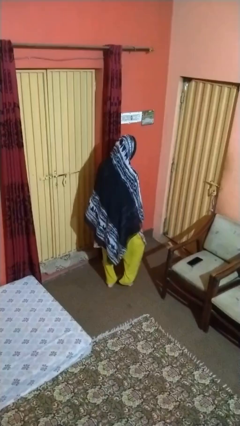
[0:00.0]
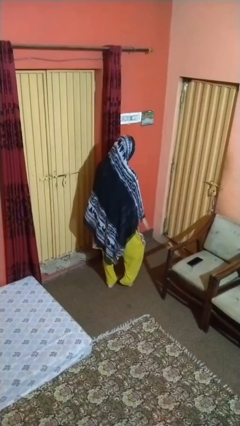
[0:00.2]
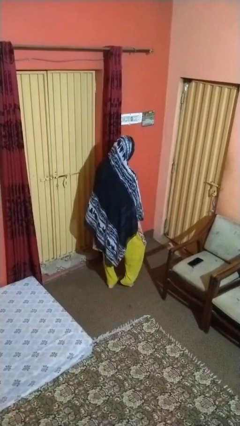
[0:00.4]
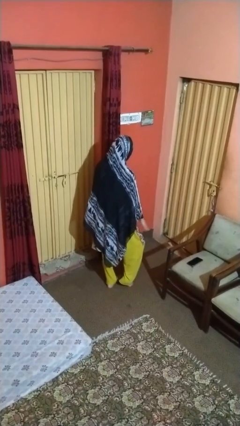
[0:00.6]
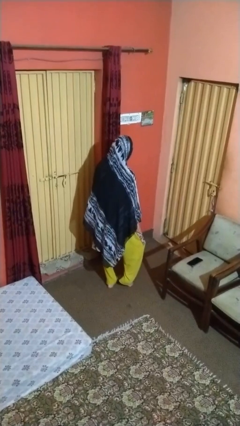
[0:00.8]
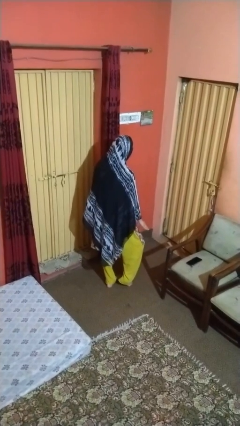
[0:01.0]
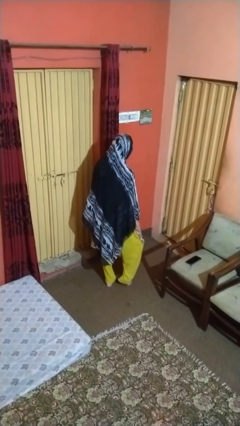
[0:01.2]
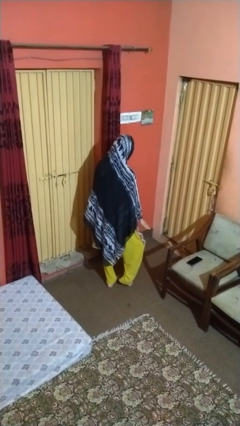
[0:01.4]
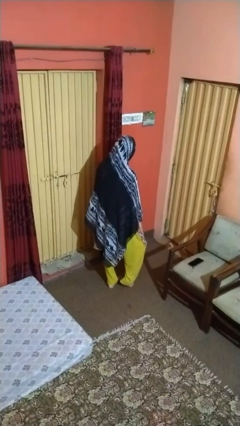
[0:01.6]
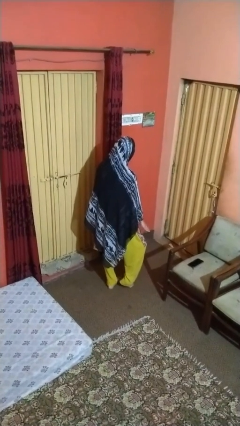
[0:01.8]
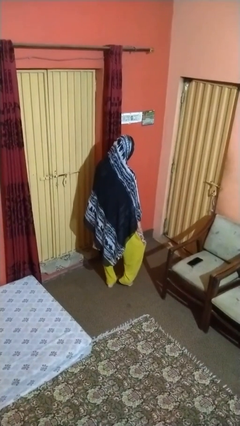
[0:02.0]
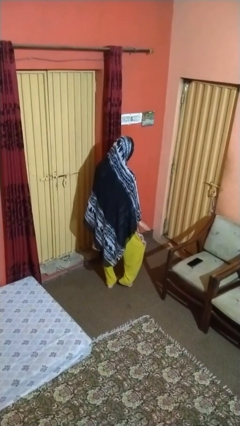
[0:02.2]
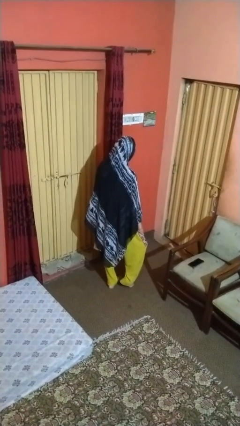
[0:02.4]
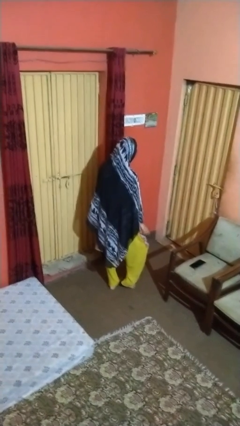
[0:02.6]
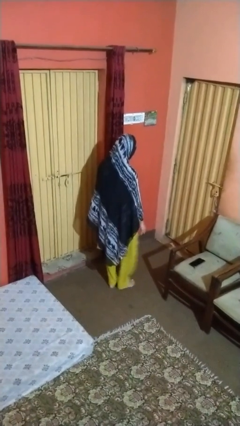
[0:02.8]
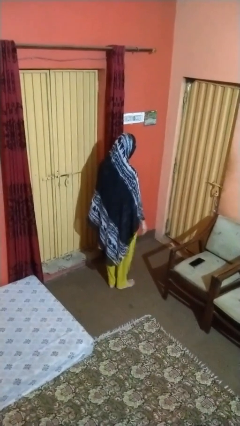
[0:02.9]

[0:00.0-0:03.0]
person slaps hands on thighs

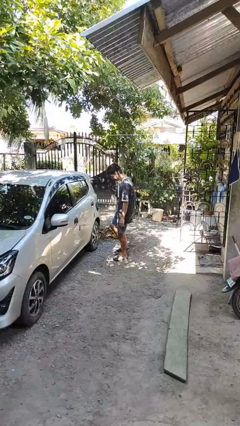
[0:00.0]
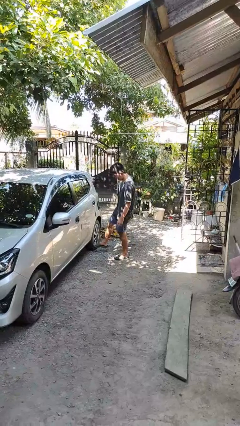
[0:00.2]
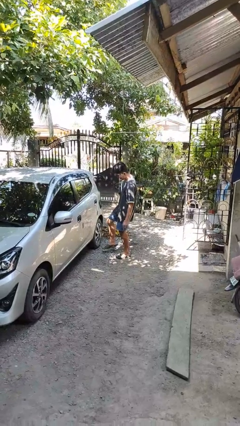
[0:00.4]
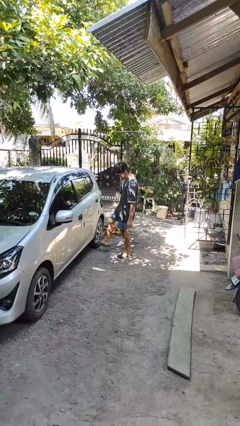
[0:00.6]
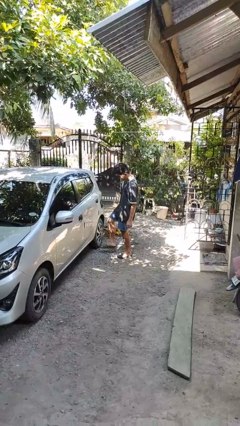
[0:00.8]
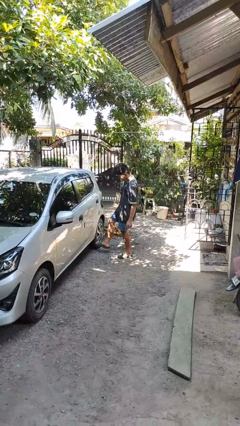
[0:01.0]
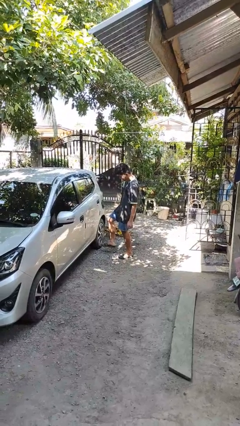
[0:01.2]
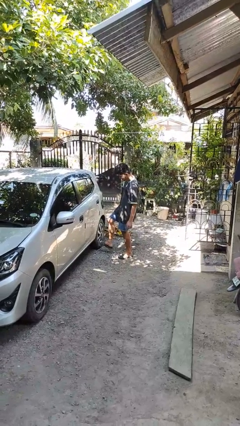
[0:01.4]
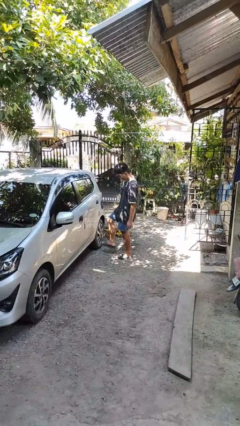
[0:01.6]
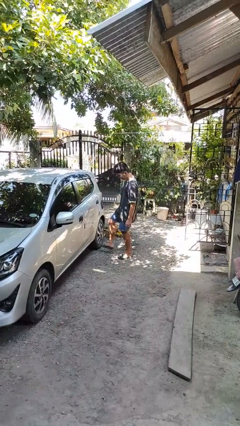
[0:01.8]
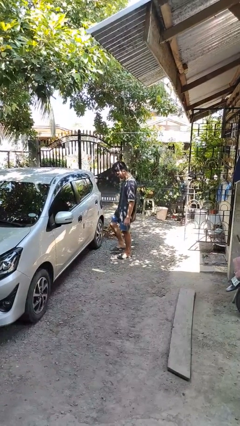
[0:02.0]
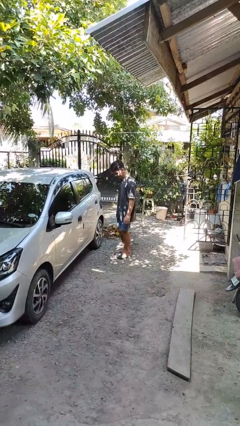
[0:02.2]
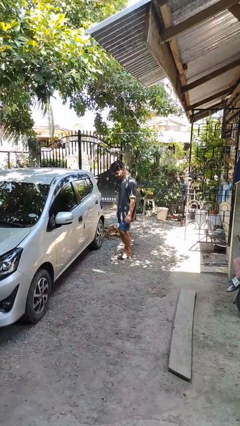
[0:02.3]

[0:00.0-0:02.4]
person kicks car tires

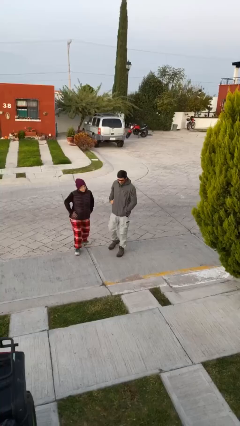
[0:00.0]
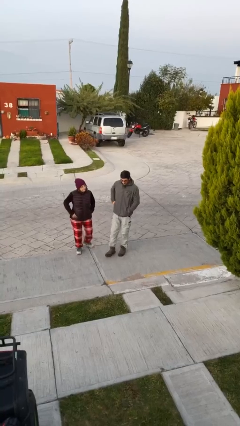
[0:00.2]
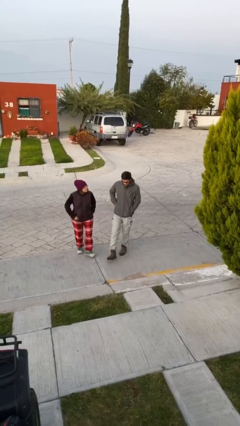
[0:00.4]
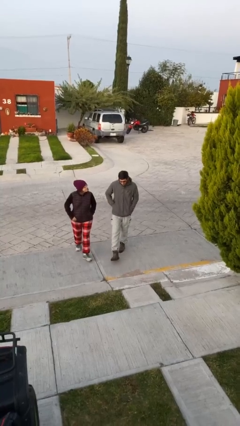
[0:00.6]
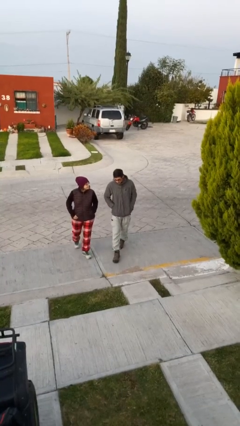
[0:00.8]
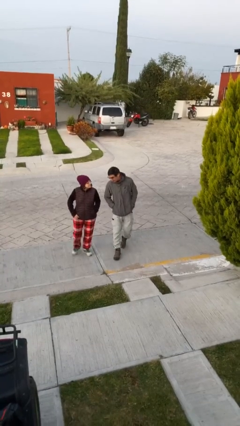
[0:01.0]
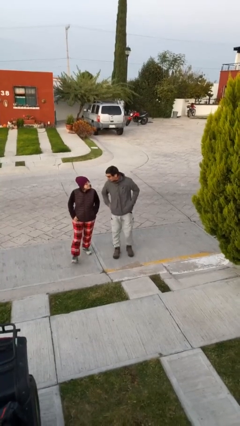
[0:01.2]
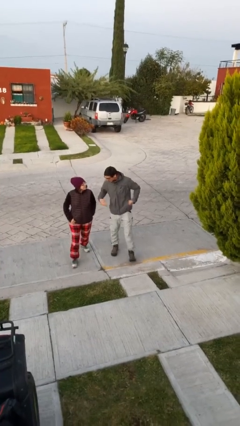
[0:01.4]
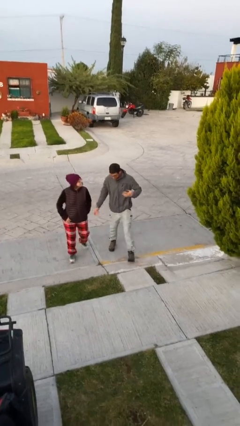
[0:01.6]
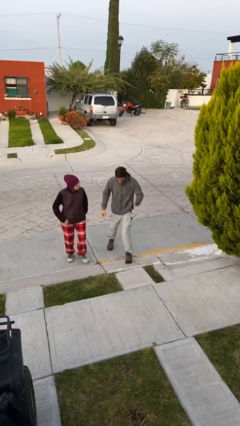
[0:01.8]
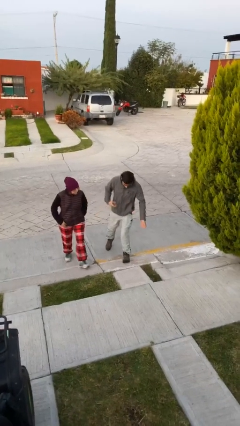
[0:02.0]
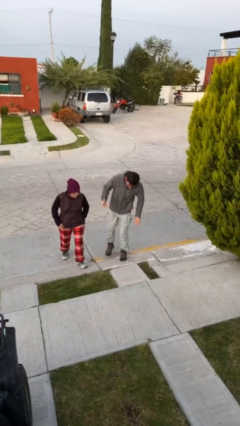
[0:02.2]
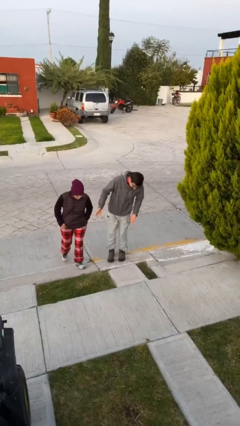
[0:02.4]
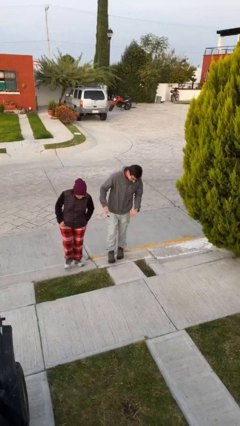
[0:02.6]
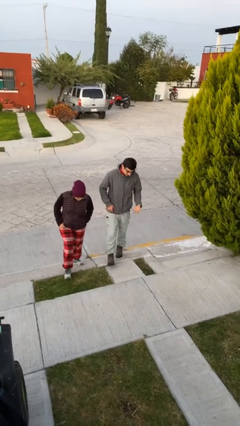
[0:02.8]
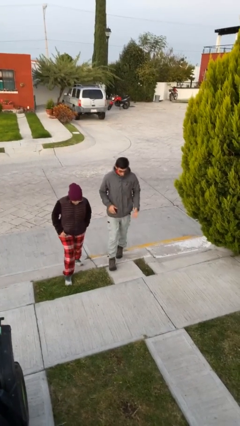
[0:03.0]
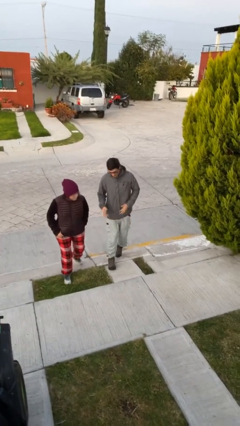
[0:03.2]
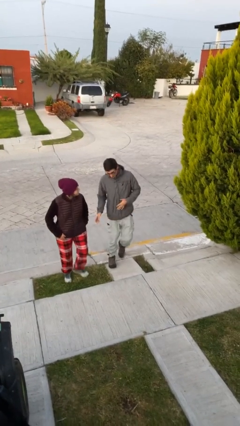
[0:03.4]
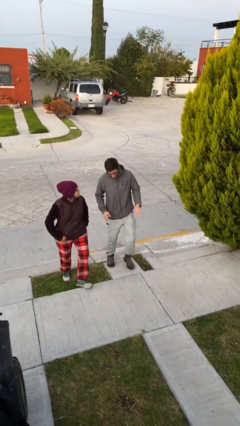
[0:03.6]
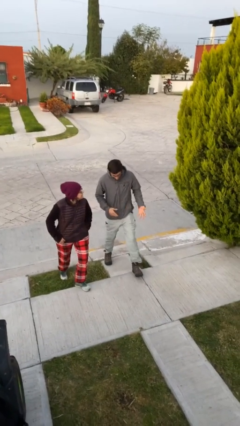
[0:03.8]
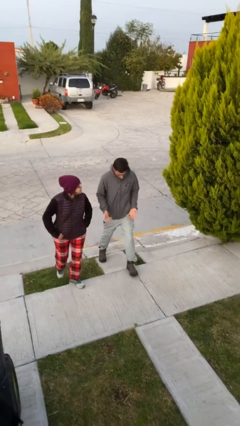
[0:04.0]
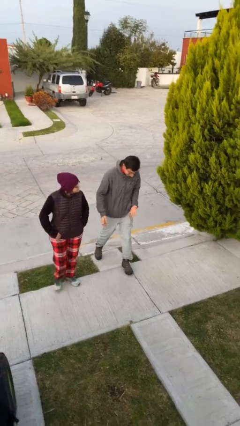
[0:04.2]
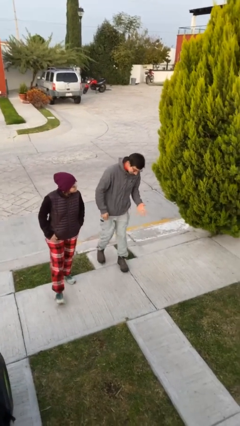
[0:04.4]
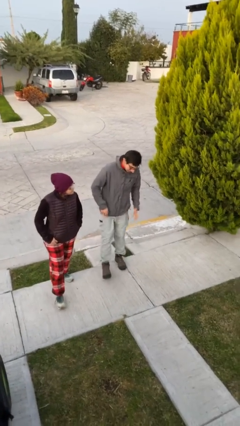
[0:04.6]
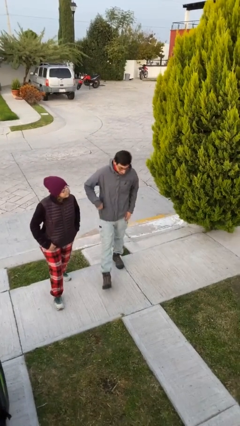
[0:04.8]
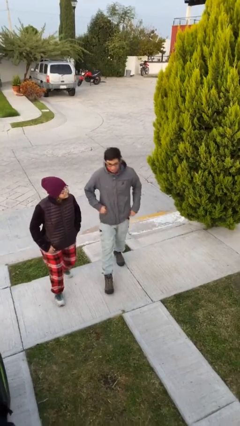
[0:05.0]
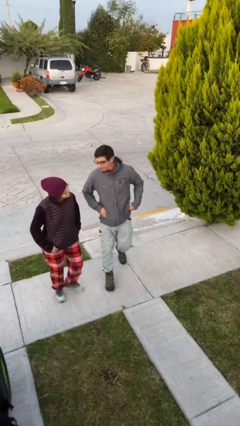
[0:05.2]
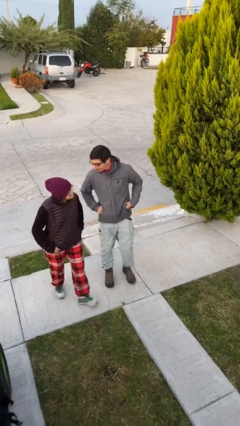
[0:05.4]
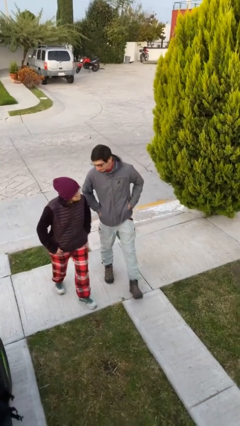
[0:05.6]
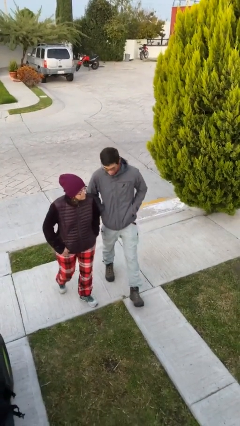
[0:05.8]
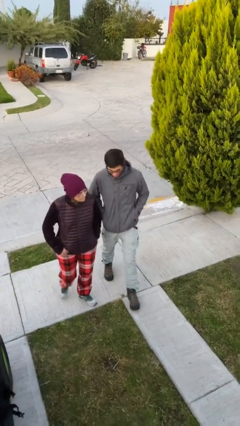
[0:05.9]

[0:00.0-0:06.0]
person talks to person

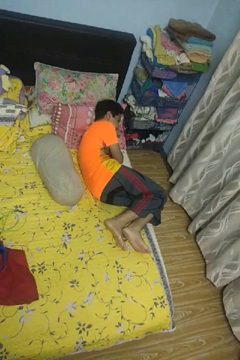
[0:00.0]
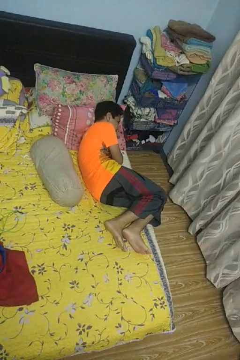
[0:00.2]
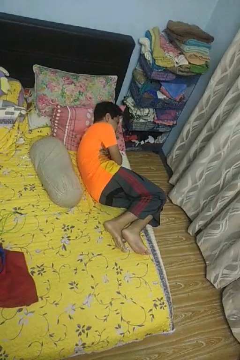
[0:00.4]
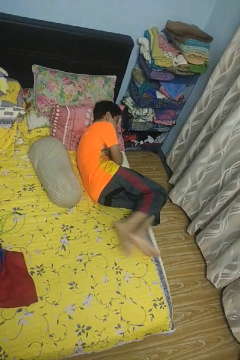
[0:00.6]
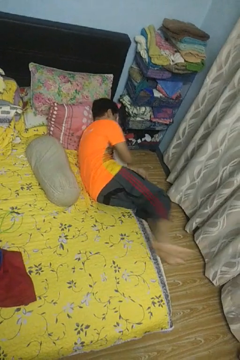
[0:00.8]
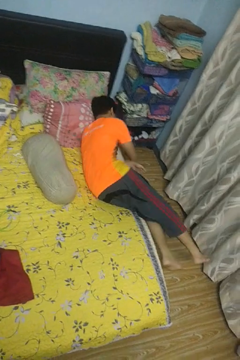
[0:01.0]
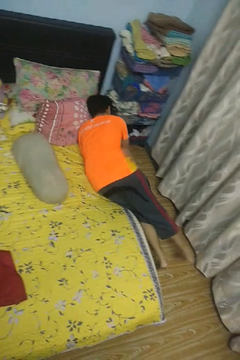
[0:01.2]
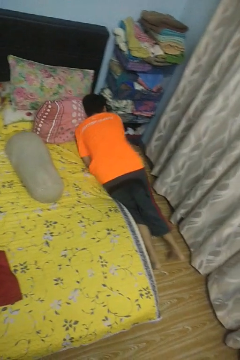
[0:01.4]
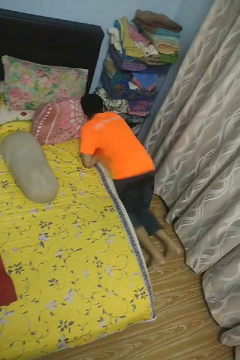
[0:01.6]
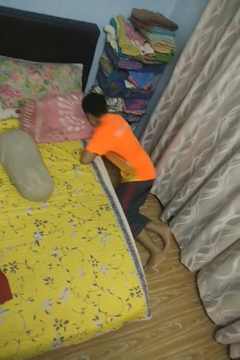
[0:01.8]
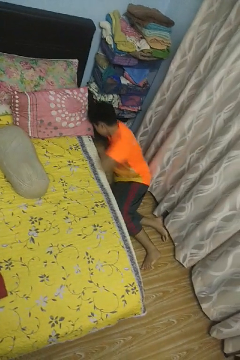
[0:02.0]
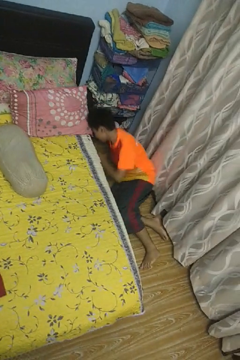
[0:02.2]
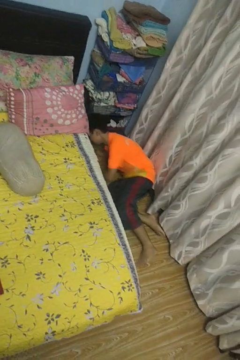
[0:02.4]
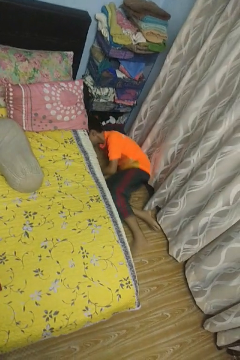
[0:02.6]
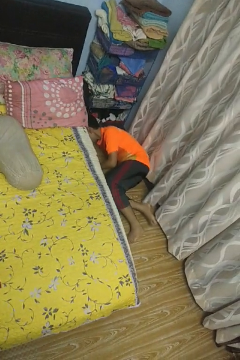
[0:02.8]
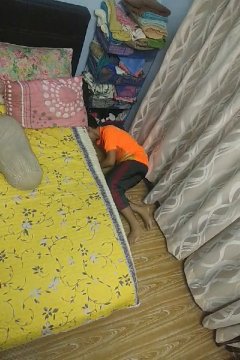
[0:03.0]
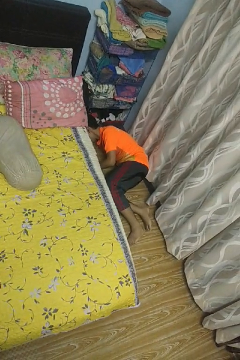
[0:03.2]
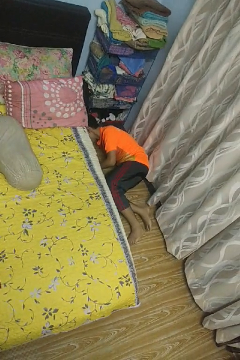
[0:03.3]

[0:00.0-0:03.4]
person falls from bed

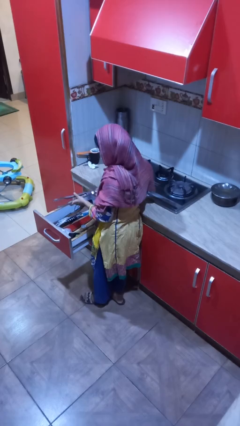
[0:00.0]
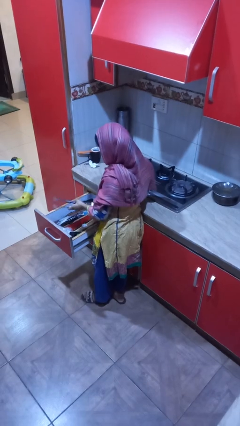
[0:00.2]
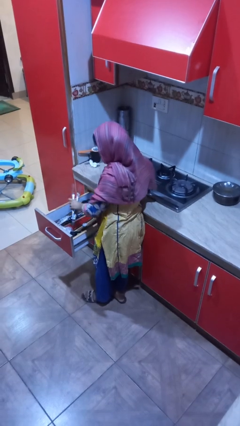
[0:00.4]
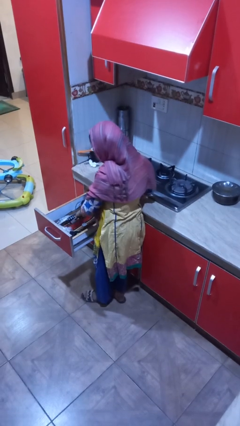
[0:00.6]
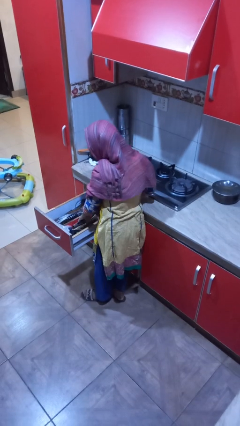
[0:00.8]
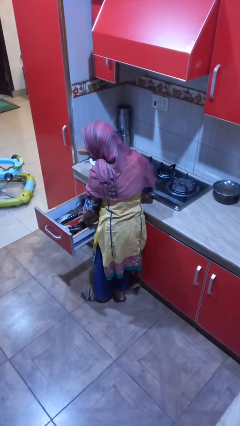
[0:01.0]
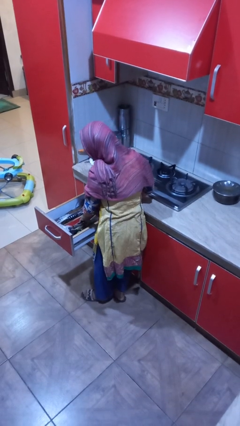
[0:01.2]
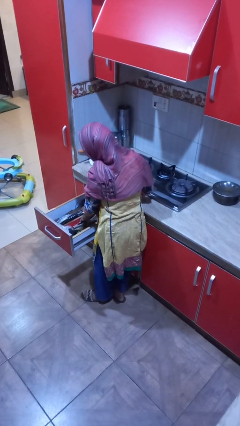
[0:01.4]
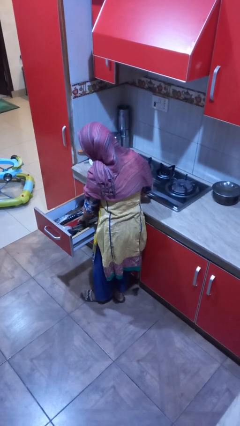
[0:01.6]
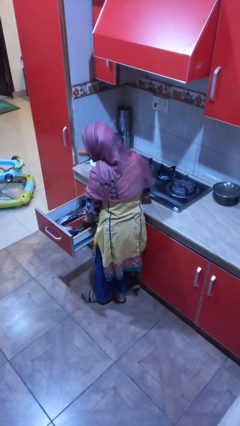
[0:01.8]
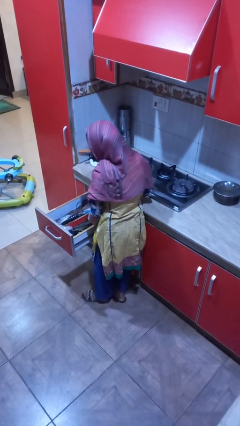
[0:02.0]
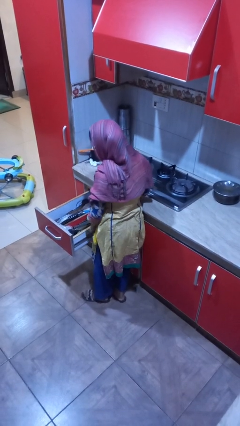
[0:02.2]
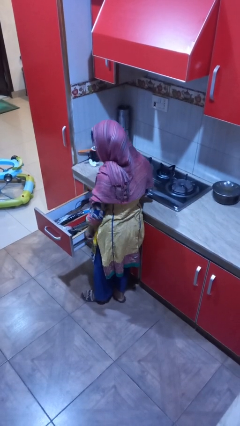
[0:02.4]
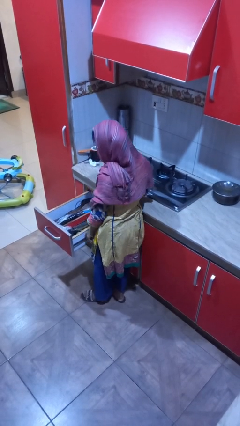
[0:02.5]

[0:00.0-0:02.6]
person puts object into kitchen drawer

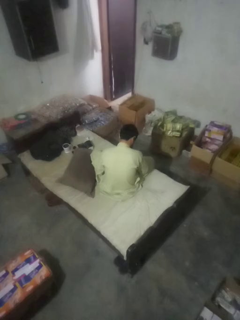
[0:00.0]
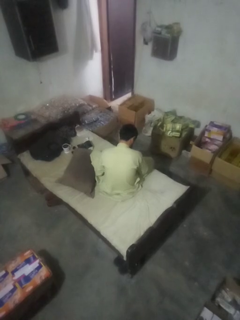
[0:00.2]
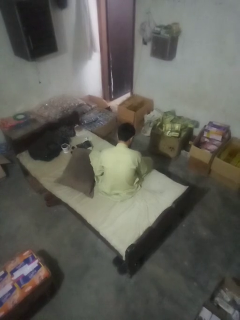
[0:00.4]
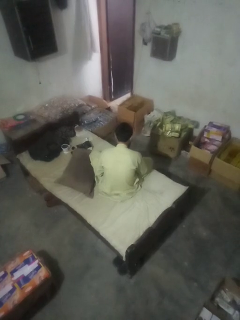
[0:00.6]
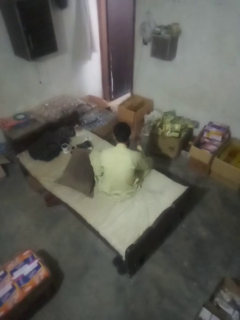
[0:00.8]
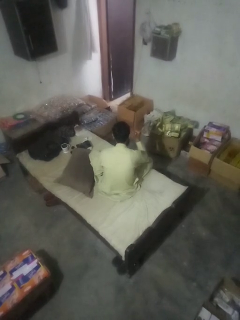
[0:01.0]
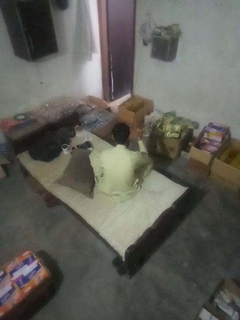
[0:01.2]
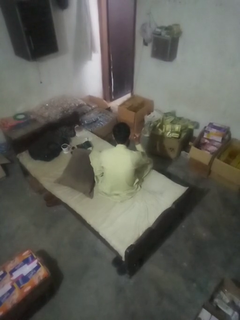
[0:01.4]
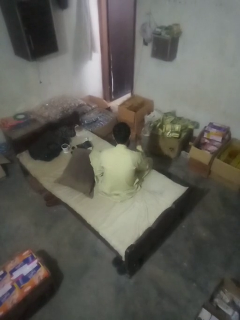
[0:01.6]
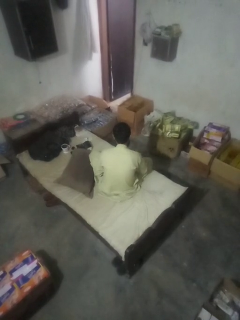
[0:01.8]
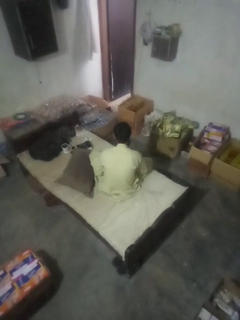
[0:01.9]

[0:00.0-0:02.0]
person gestures behind me
